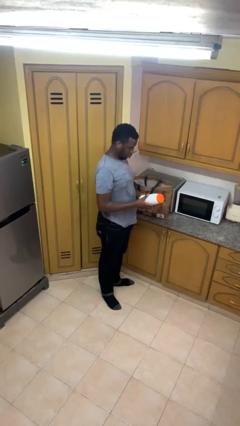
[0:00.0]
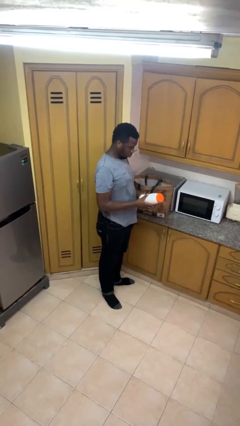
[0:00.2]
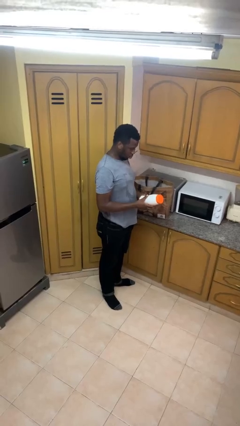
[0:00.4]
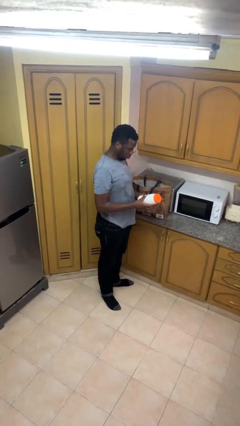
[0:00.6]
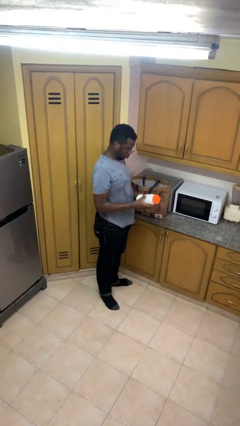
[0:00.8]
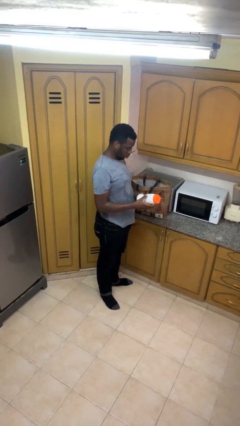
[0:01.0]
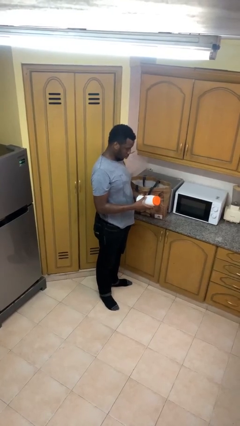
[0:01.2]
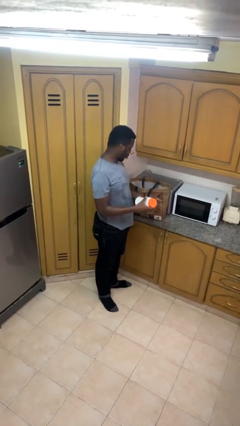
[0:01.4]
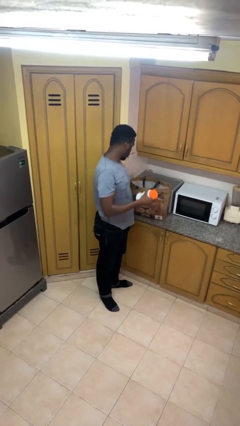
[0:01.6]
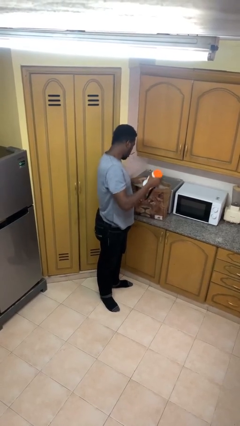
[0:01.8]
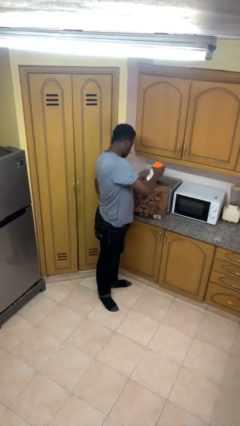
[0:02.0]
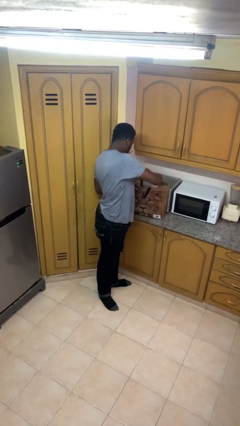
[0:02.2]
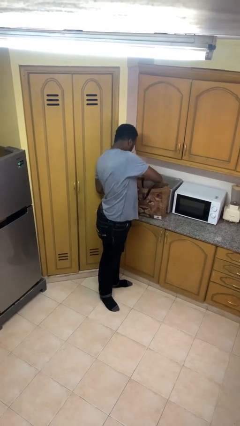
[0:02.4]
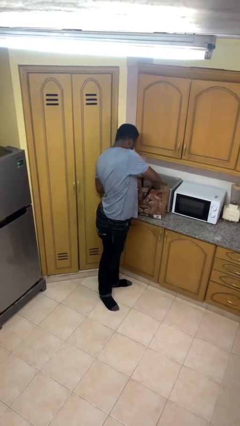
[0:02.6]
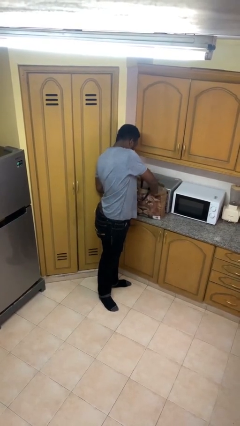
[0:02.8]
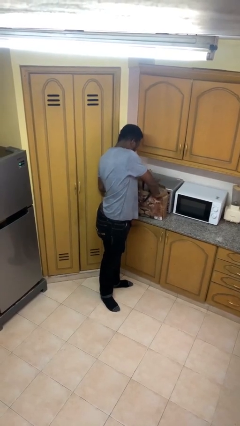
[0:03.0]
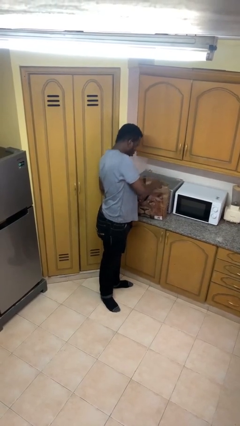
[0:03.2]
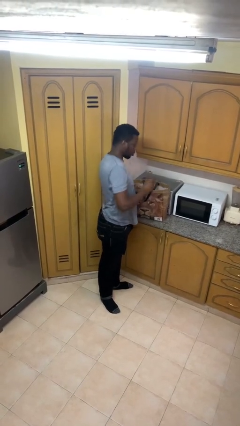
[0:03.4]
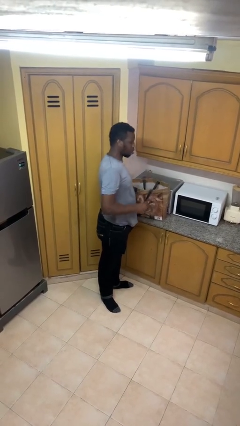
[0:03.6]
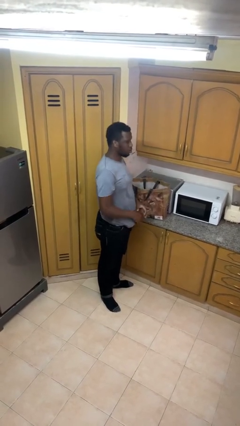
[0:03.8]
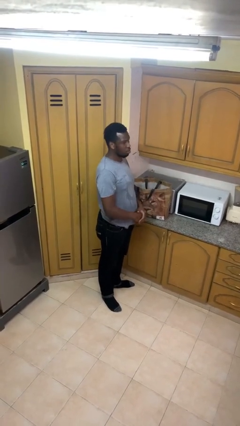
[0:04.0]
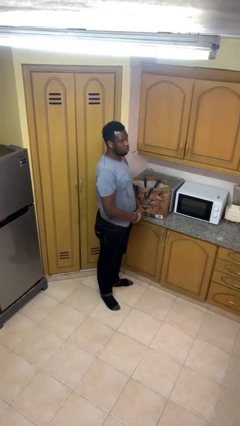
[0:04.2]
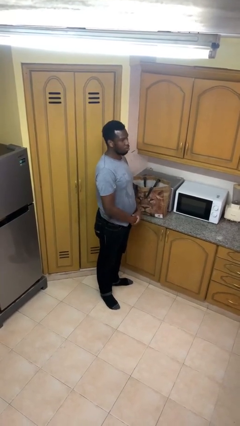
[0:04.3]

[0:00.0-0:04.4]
person puts object into bag

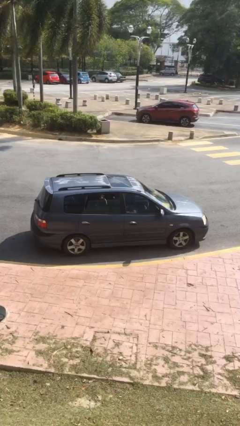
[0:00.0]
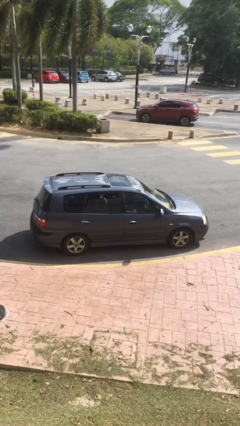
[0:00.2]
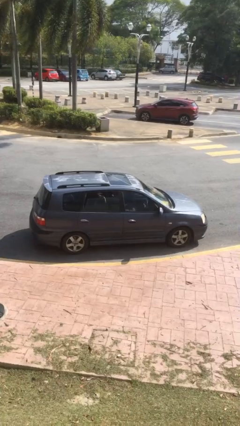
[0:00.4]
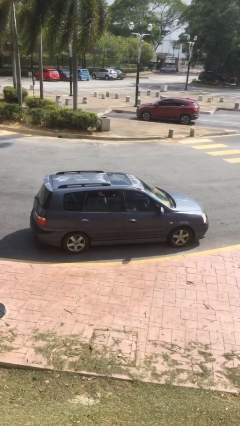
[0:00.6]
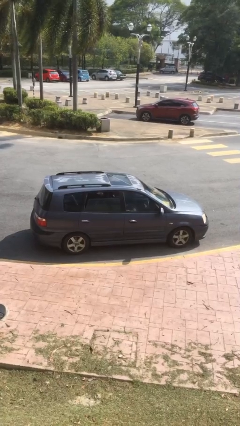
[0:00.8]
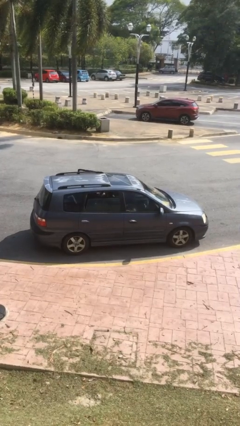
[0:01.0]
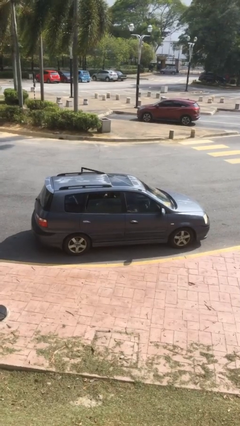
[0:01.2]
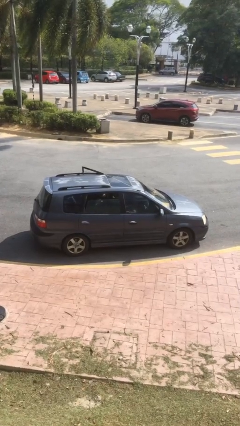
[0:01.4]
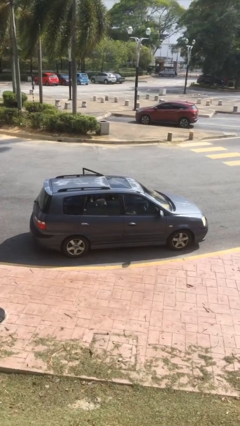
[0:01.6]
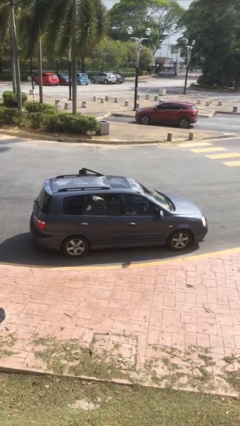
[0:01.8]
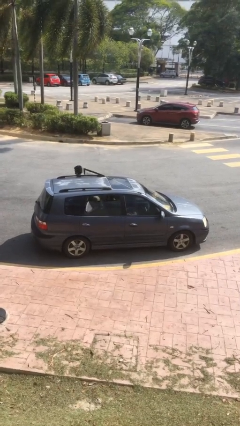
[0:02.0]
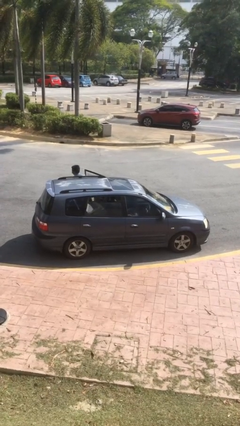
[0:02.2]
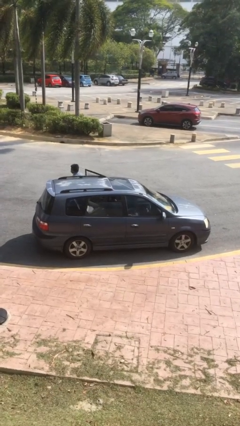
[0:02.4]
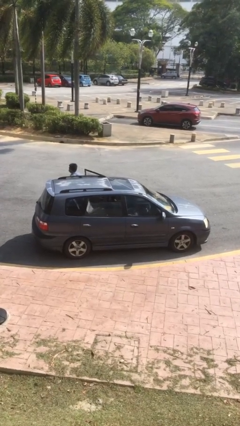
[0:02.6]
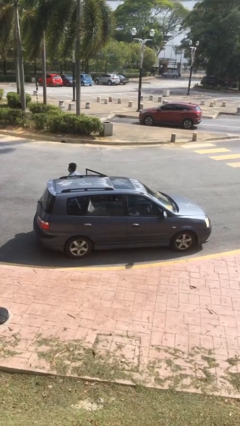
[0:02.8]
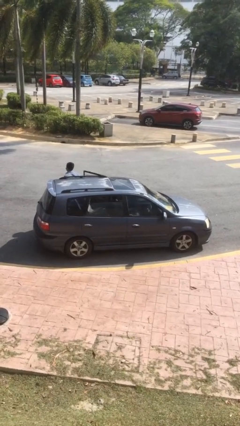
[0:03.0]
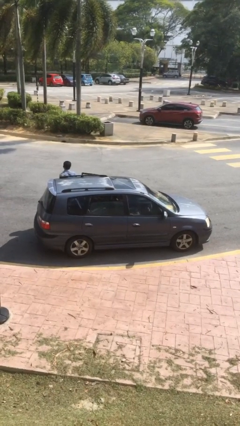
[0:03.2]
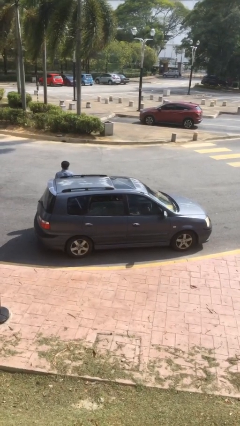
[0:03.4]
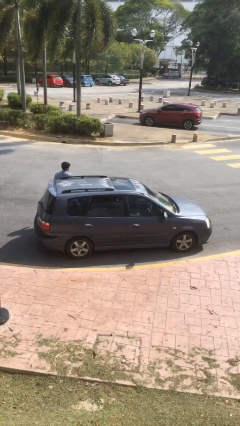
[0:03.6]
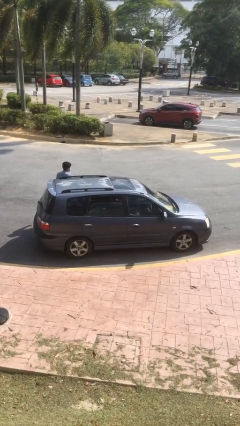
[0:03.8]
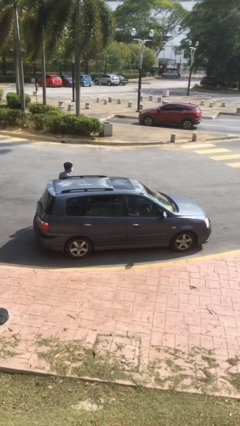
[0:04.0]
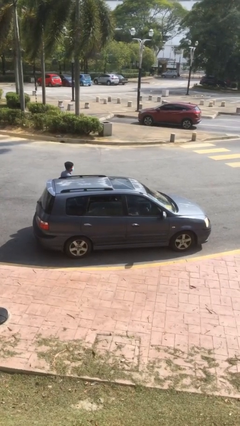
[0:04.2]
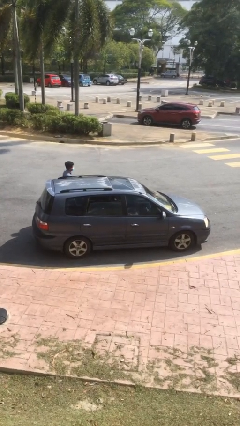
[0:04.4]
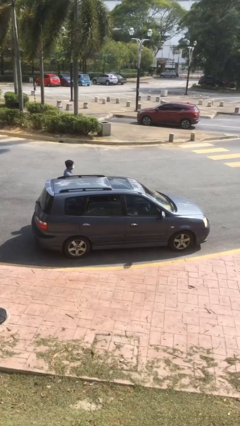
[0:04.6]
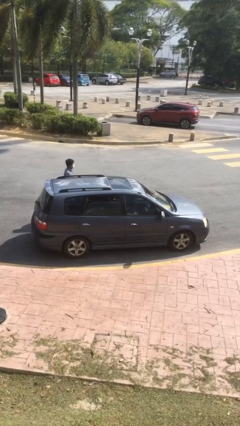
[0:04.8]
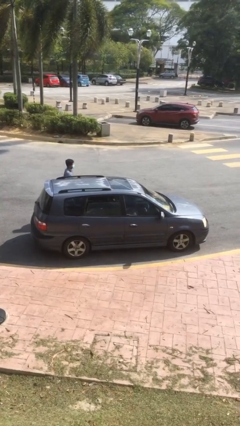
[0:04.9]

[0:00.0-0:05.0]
car drops off person

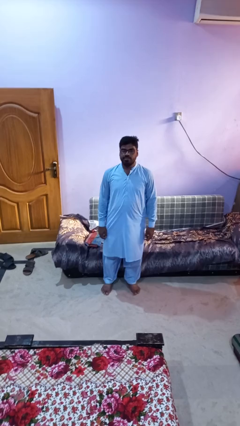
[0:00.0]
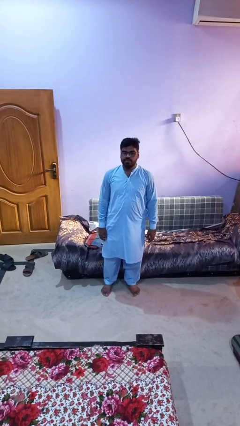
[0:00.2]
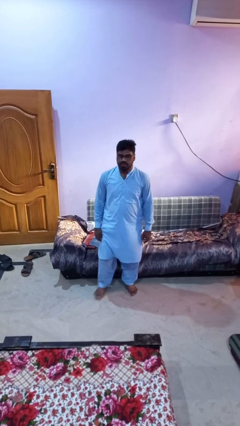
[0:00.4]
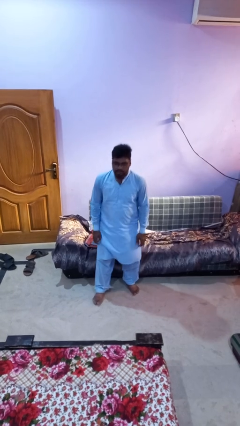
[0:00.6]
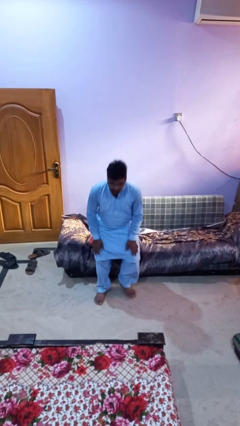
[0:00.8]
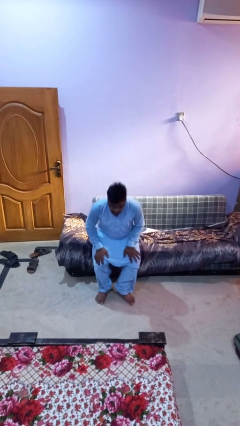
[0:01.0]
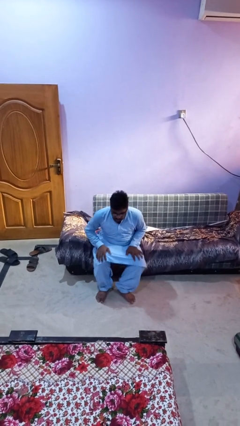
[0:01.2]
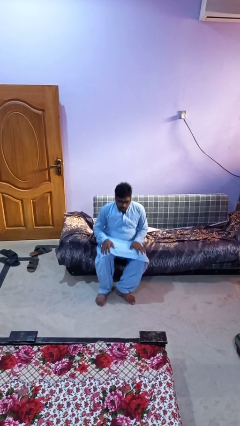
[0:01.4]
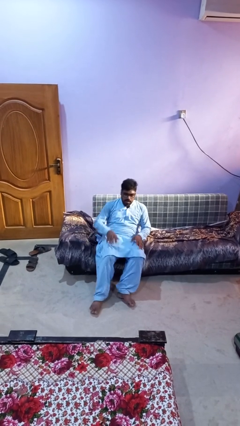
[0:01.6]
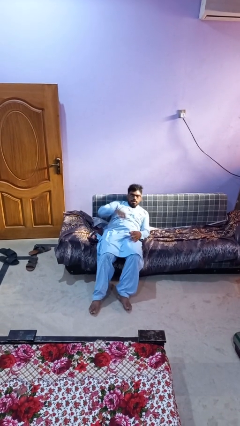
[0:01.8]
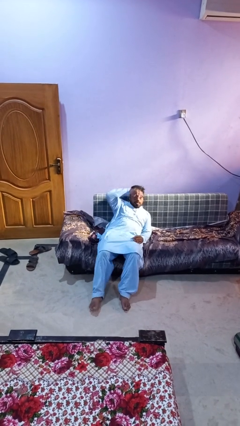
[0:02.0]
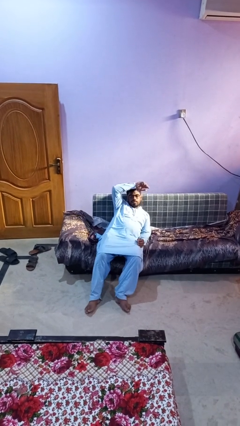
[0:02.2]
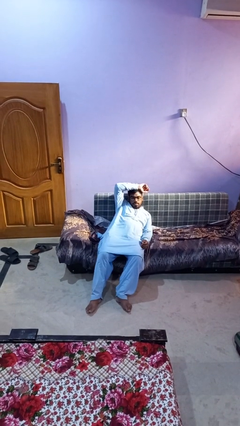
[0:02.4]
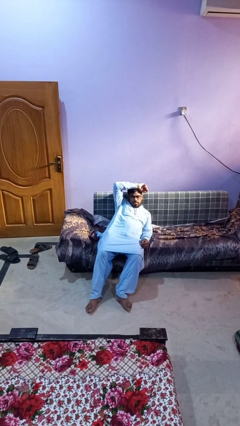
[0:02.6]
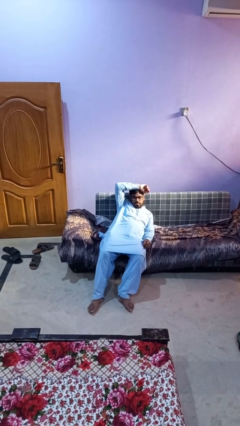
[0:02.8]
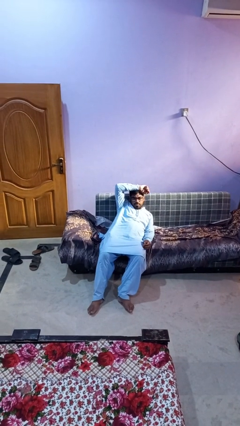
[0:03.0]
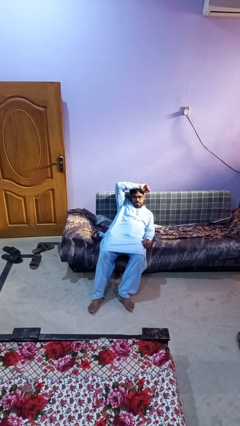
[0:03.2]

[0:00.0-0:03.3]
person lies down on couch

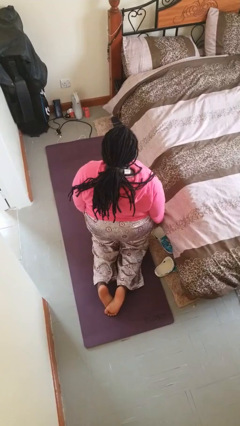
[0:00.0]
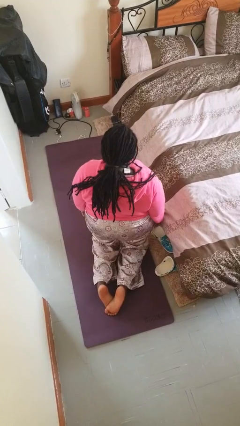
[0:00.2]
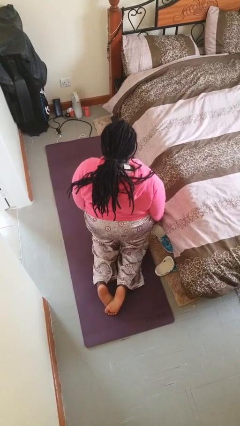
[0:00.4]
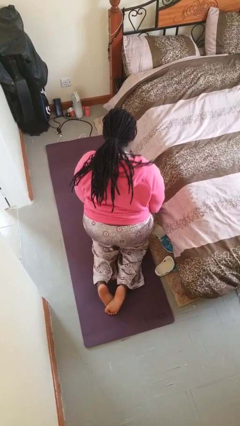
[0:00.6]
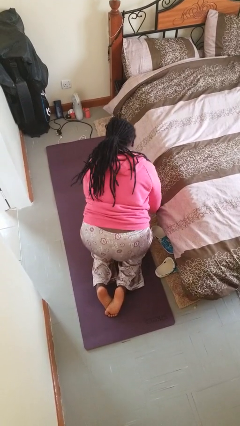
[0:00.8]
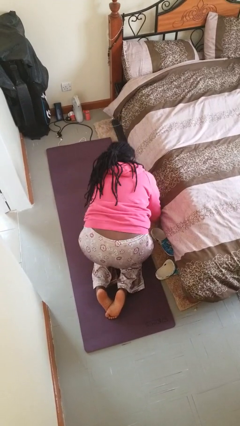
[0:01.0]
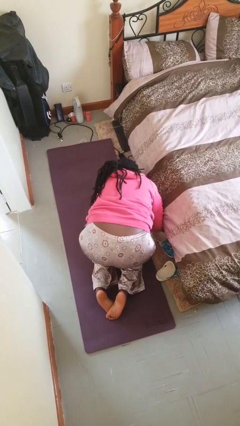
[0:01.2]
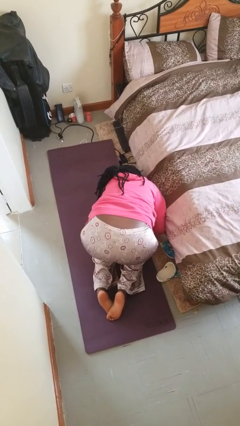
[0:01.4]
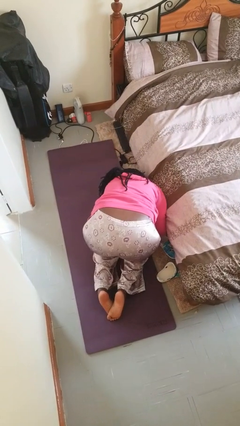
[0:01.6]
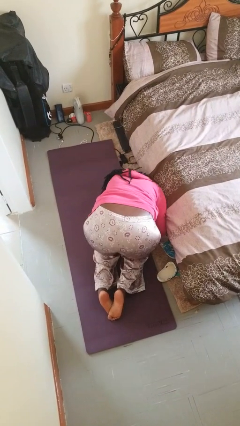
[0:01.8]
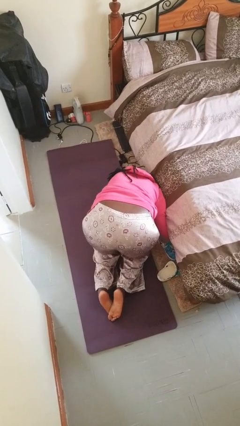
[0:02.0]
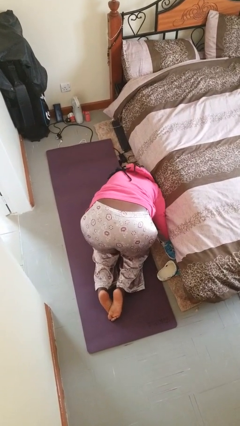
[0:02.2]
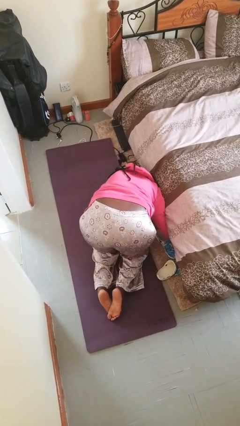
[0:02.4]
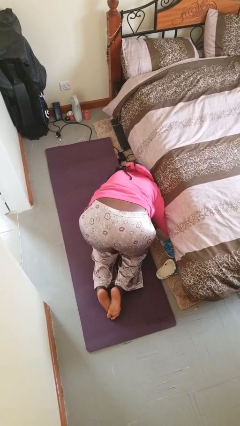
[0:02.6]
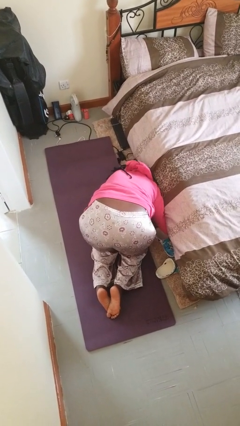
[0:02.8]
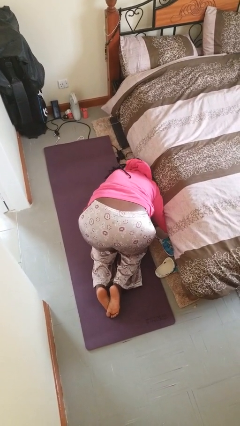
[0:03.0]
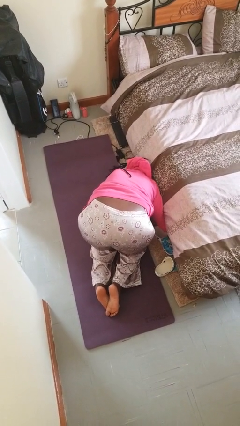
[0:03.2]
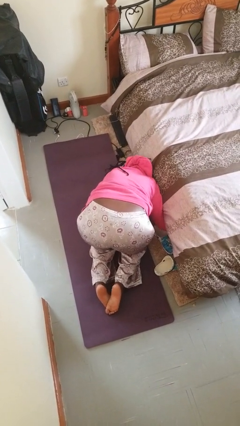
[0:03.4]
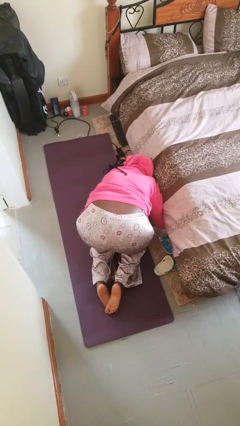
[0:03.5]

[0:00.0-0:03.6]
person searches under bed

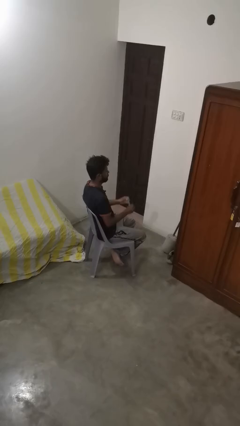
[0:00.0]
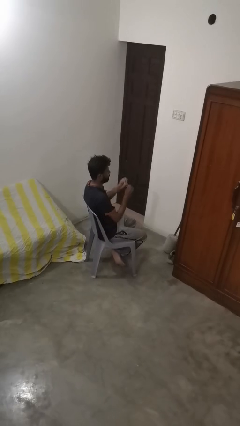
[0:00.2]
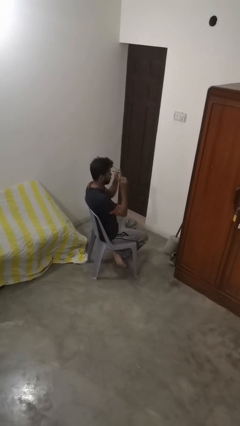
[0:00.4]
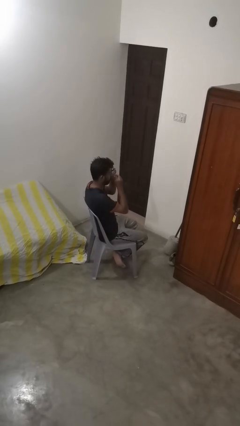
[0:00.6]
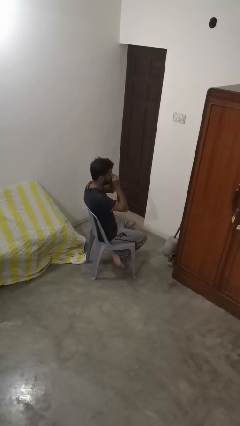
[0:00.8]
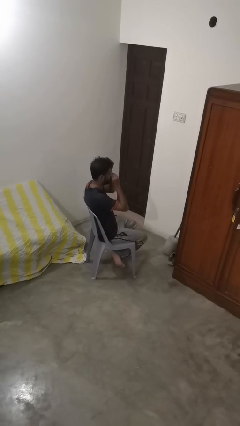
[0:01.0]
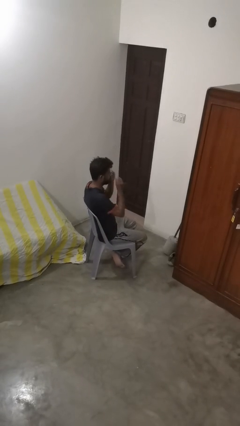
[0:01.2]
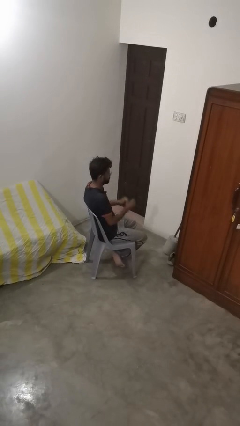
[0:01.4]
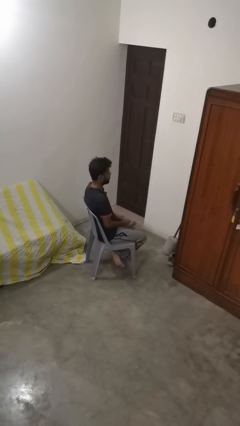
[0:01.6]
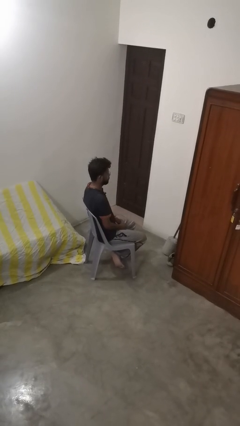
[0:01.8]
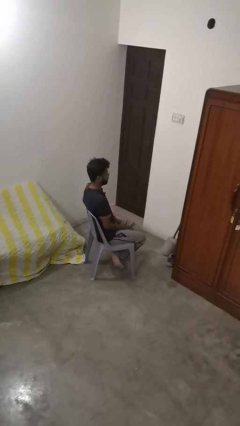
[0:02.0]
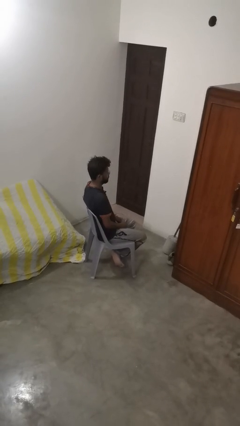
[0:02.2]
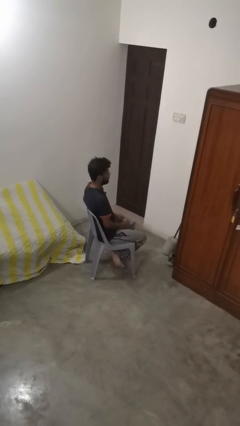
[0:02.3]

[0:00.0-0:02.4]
person puts on glasses
